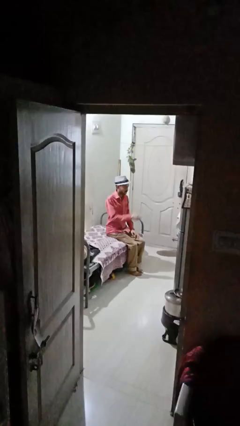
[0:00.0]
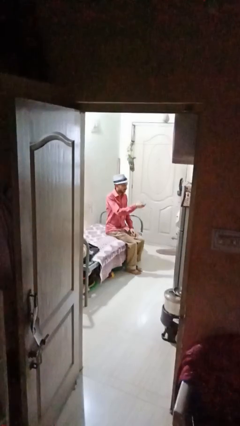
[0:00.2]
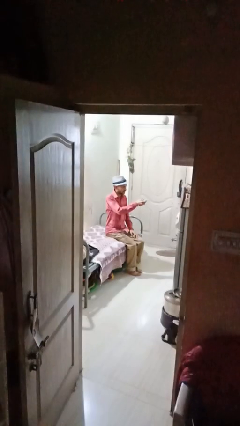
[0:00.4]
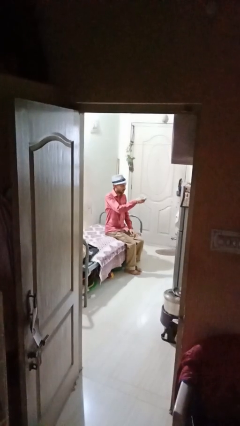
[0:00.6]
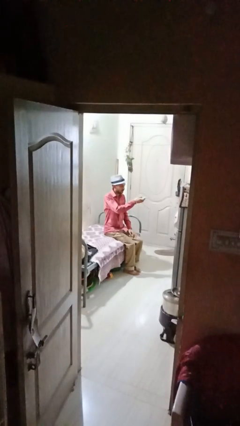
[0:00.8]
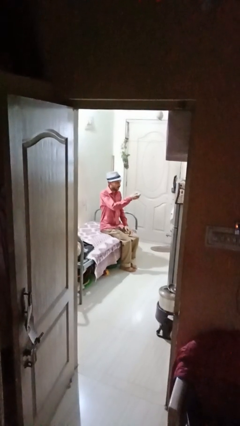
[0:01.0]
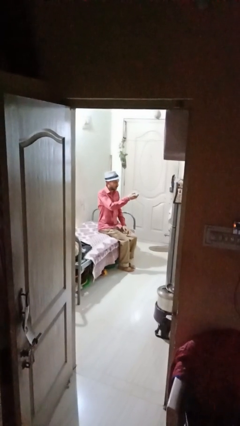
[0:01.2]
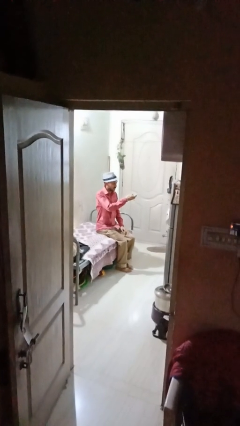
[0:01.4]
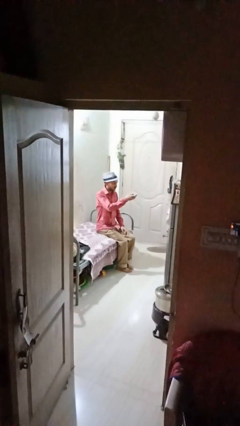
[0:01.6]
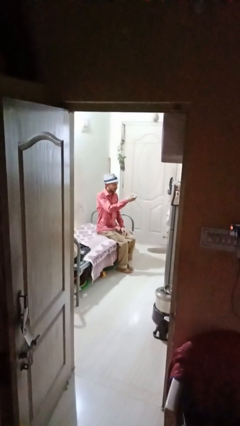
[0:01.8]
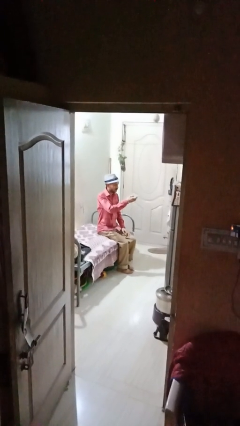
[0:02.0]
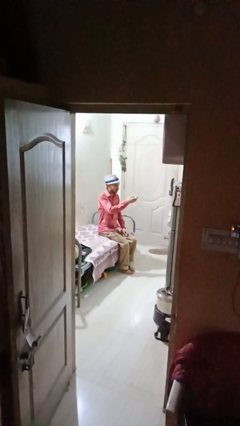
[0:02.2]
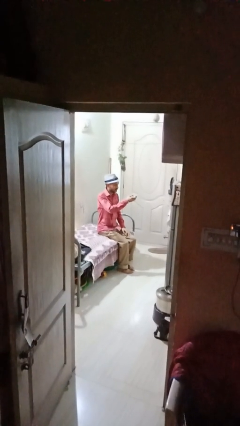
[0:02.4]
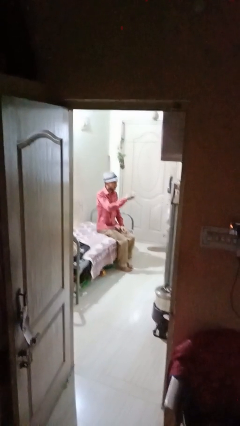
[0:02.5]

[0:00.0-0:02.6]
person uses television remote

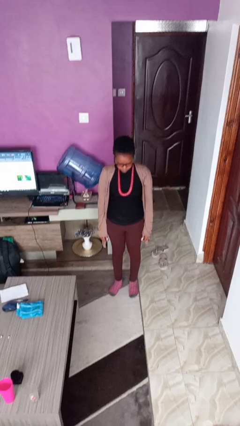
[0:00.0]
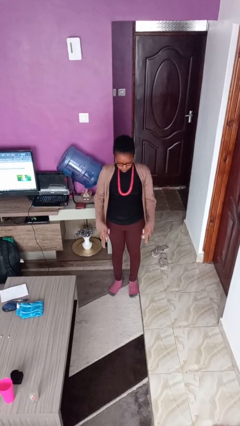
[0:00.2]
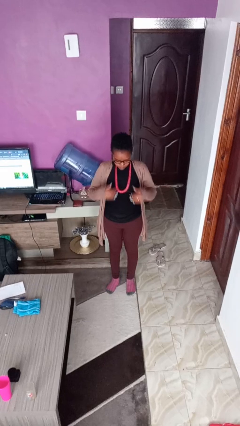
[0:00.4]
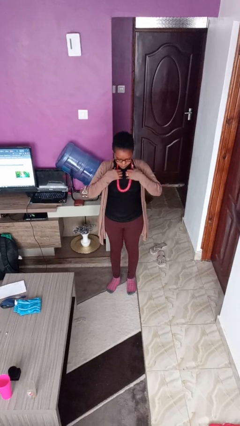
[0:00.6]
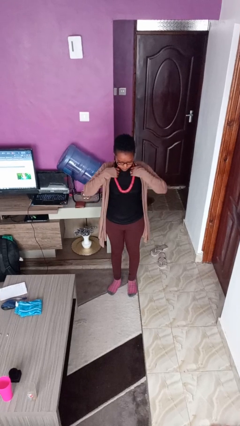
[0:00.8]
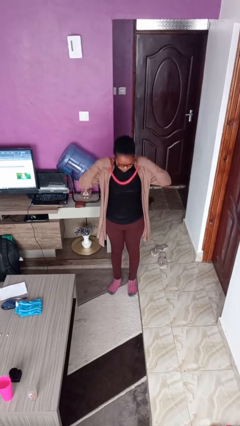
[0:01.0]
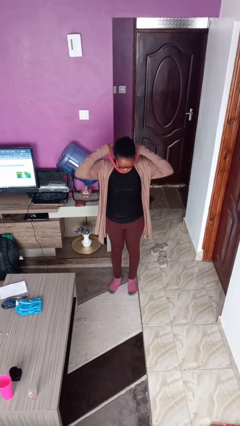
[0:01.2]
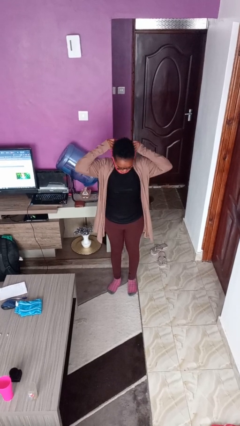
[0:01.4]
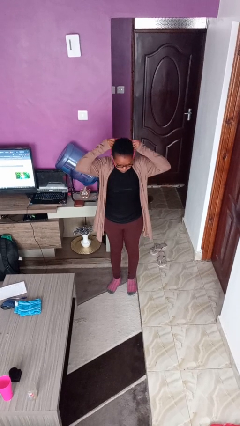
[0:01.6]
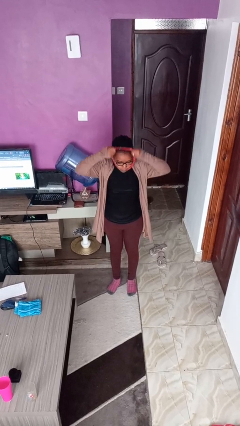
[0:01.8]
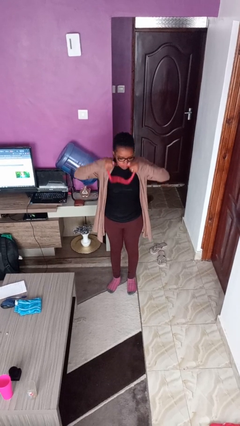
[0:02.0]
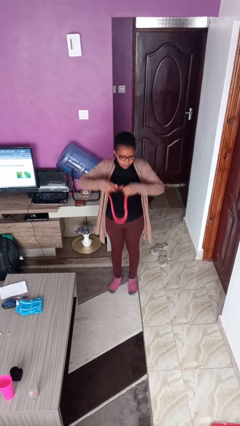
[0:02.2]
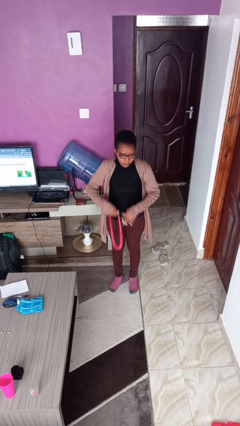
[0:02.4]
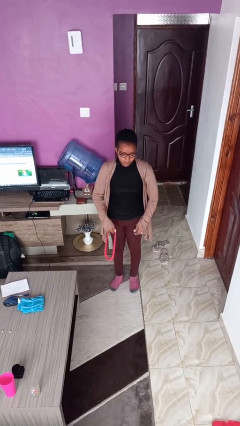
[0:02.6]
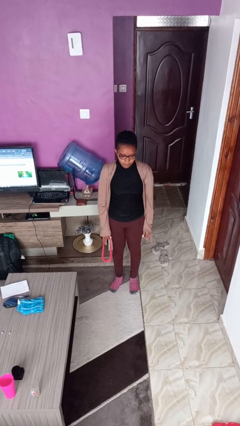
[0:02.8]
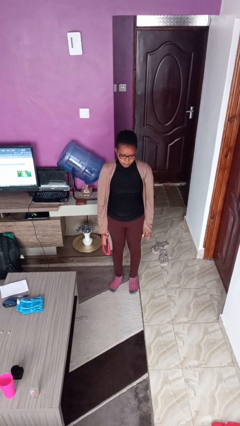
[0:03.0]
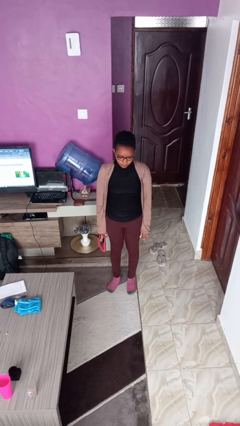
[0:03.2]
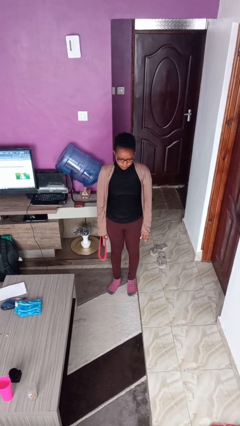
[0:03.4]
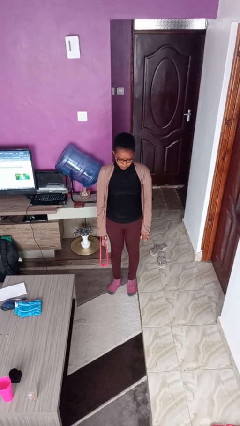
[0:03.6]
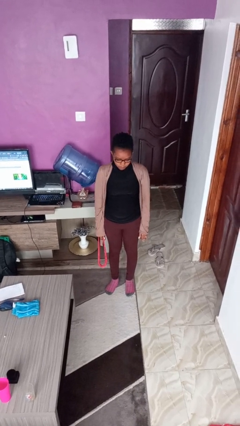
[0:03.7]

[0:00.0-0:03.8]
person takes off necklace

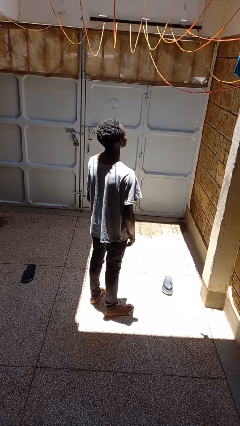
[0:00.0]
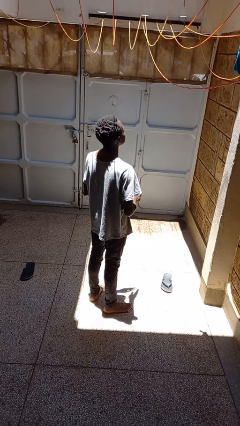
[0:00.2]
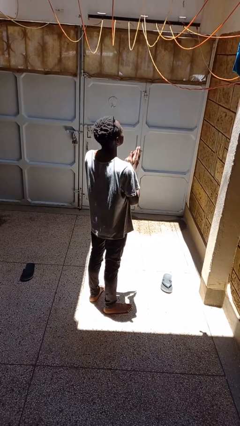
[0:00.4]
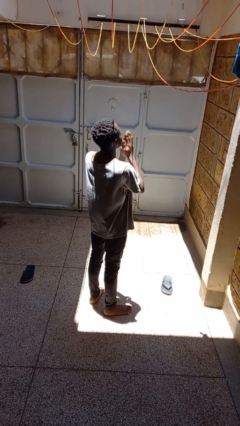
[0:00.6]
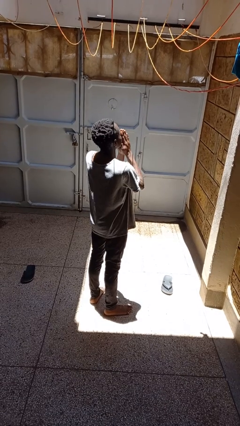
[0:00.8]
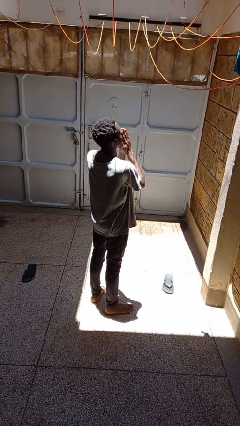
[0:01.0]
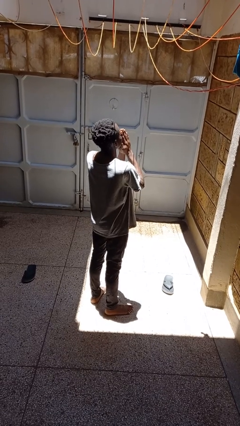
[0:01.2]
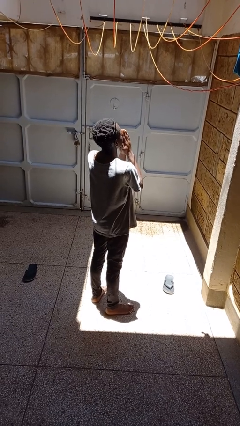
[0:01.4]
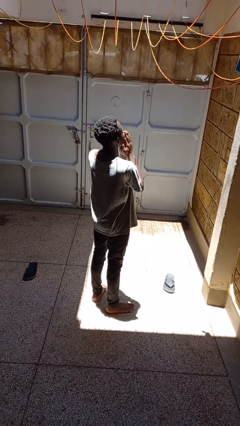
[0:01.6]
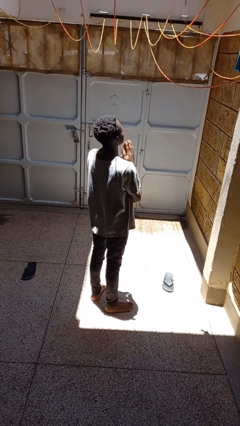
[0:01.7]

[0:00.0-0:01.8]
person prays

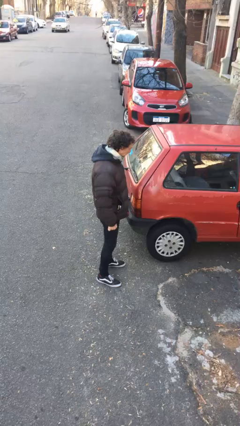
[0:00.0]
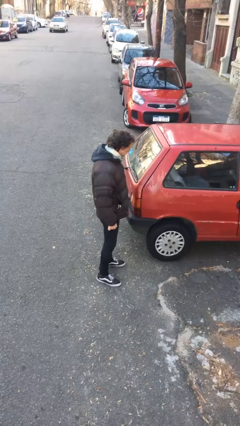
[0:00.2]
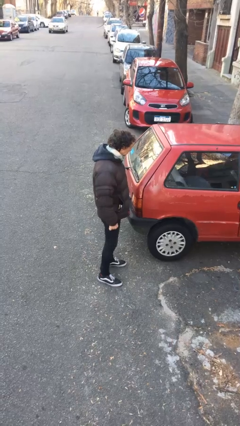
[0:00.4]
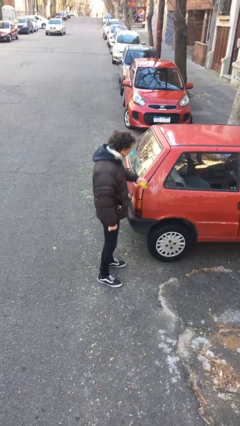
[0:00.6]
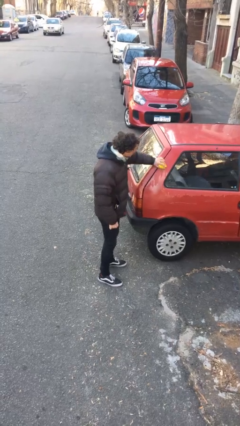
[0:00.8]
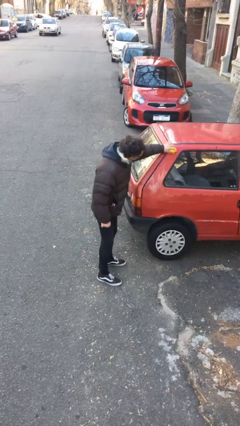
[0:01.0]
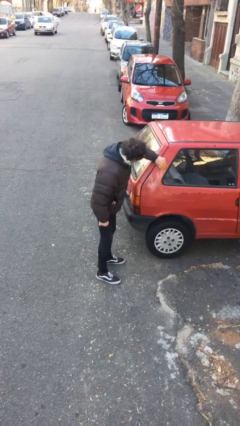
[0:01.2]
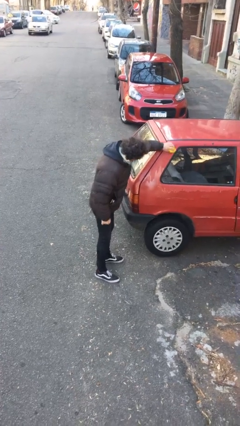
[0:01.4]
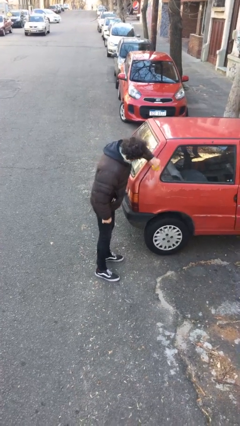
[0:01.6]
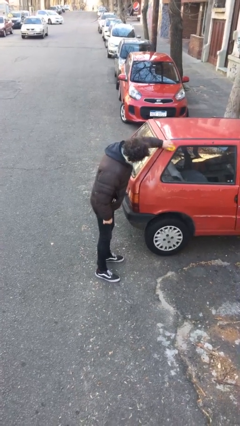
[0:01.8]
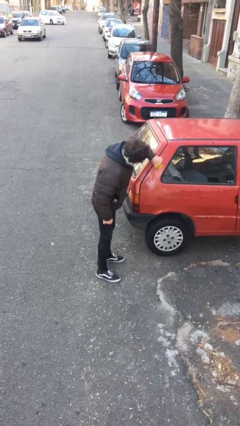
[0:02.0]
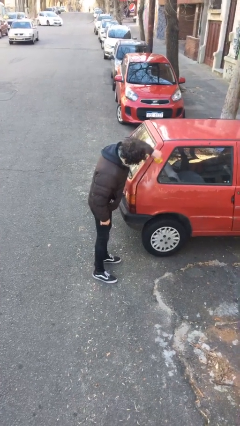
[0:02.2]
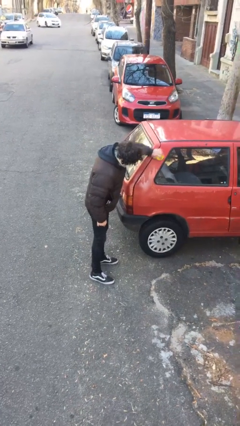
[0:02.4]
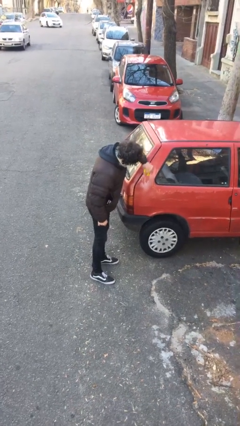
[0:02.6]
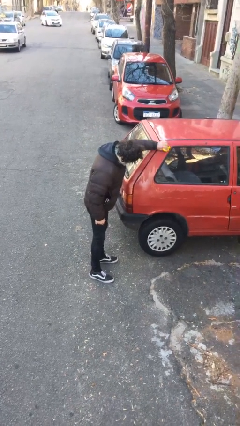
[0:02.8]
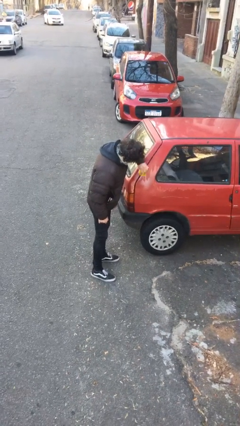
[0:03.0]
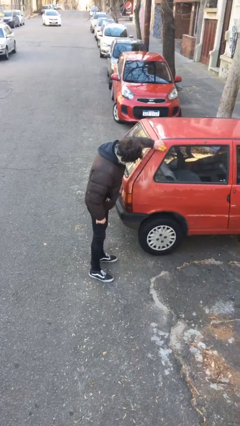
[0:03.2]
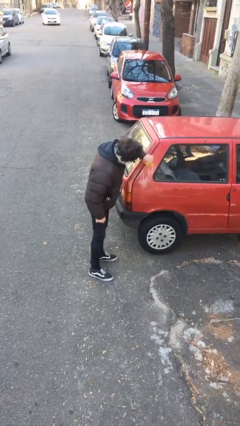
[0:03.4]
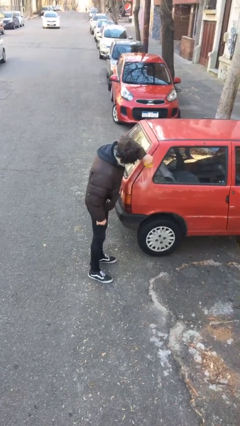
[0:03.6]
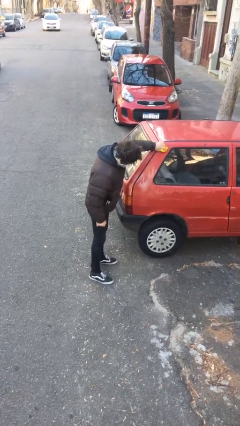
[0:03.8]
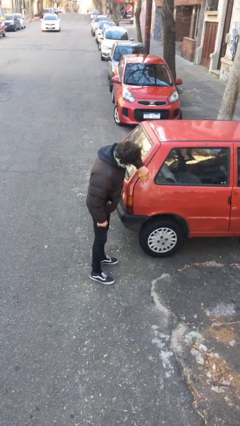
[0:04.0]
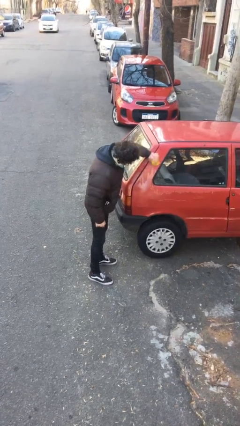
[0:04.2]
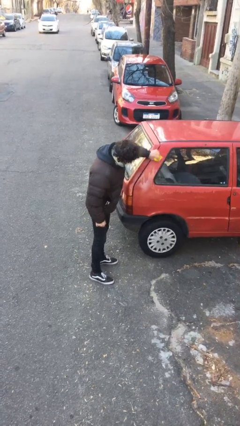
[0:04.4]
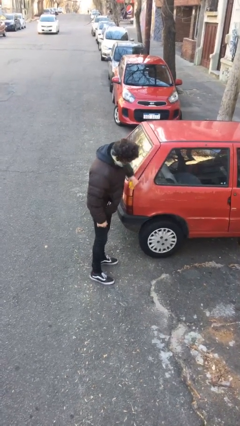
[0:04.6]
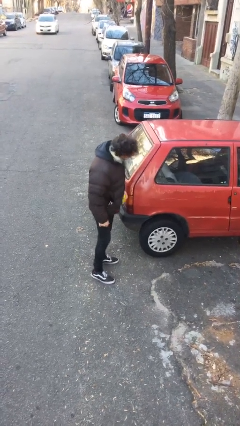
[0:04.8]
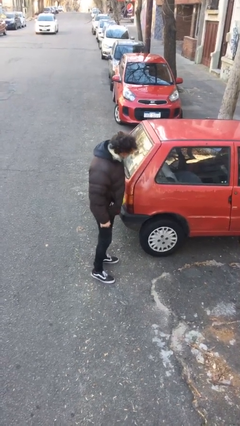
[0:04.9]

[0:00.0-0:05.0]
person polishes car with rag

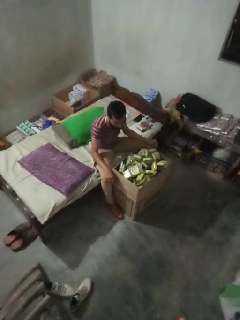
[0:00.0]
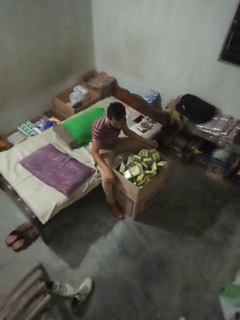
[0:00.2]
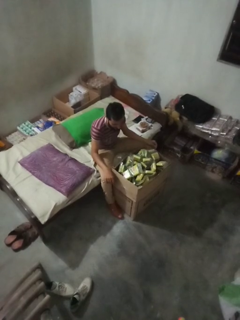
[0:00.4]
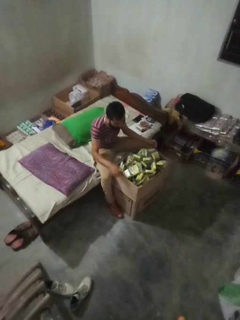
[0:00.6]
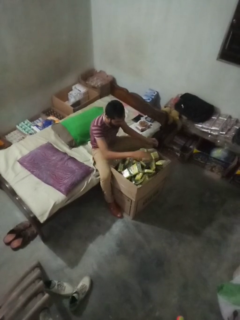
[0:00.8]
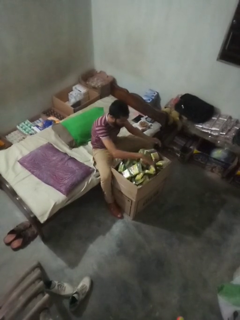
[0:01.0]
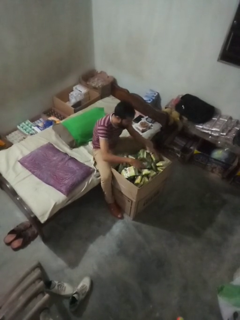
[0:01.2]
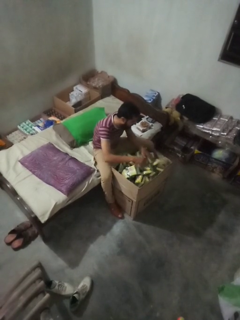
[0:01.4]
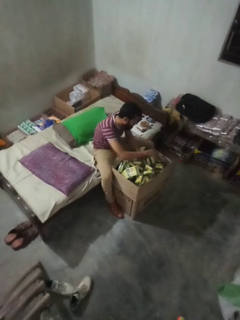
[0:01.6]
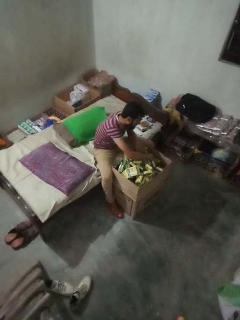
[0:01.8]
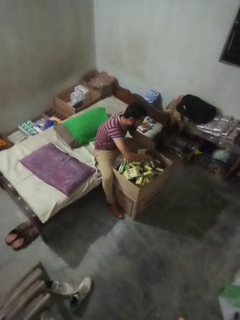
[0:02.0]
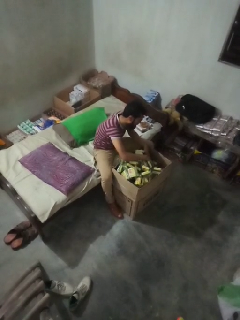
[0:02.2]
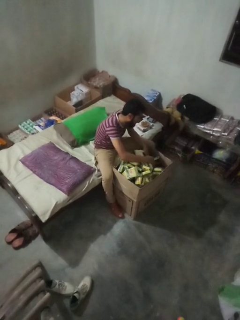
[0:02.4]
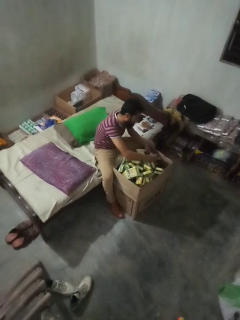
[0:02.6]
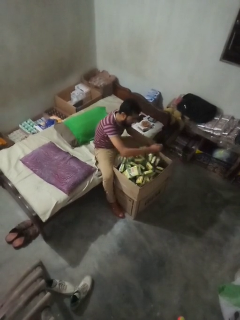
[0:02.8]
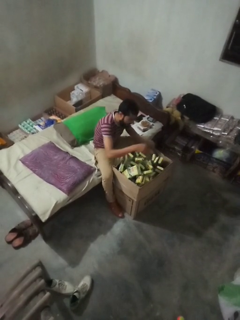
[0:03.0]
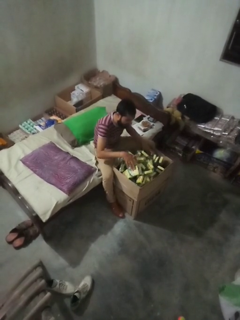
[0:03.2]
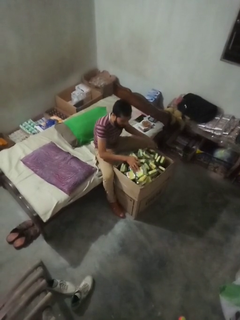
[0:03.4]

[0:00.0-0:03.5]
person searches in box

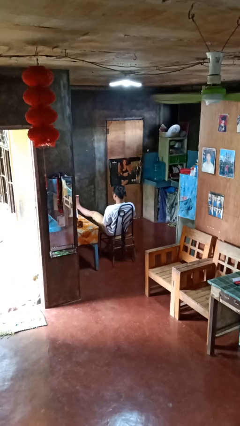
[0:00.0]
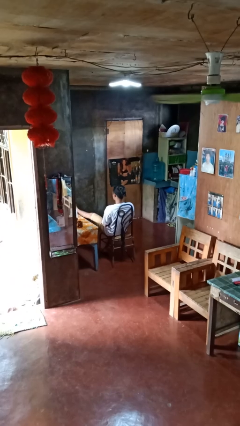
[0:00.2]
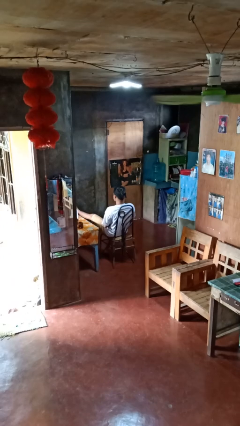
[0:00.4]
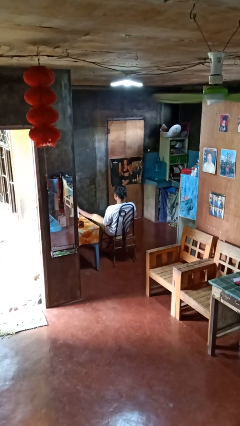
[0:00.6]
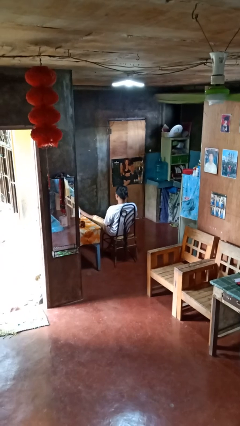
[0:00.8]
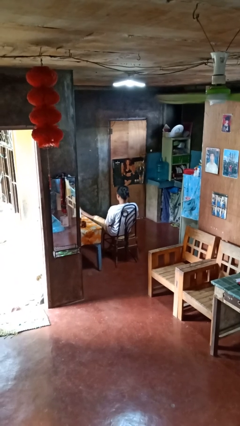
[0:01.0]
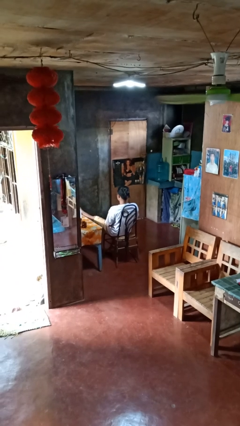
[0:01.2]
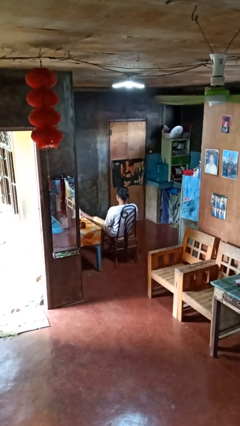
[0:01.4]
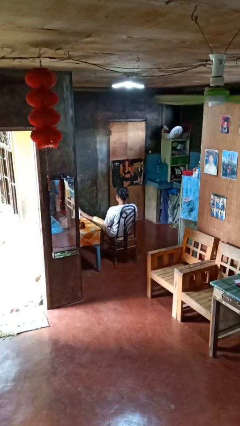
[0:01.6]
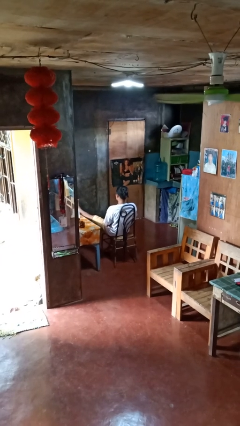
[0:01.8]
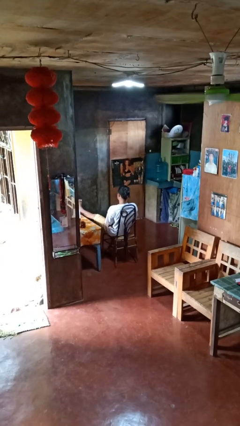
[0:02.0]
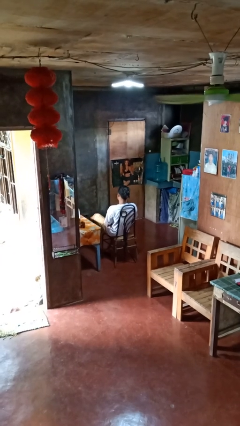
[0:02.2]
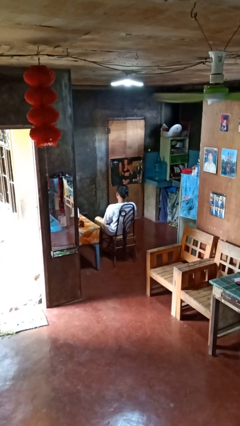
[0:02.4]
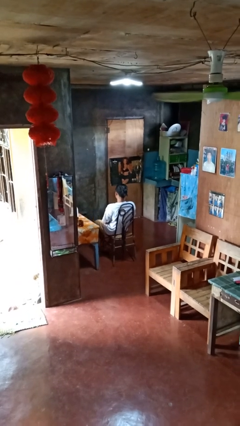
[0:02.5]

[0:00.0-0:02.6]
person puts feet up
